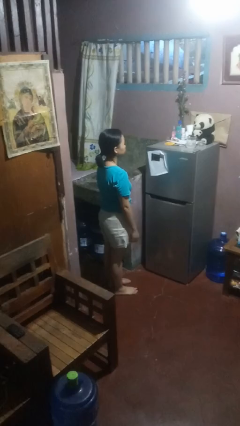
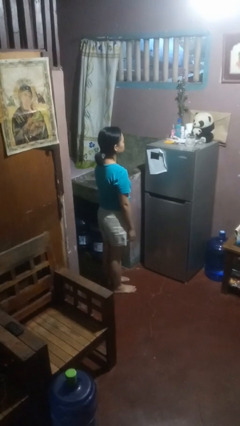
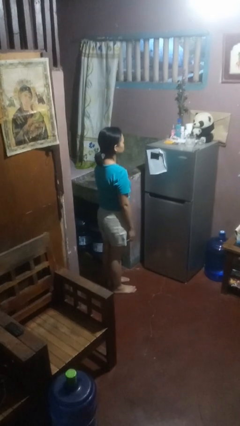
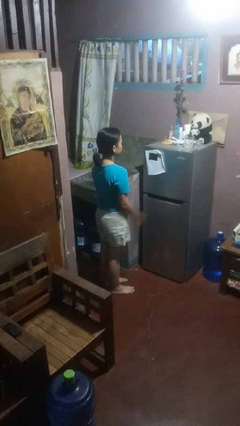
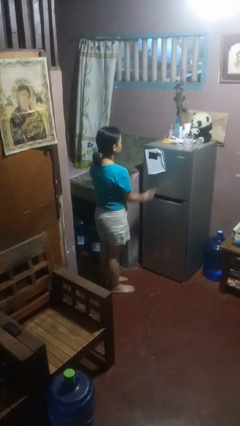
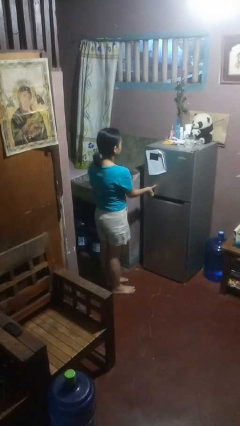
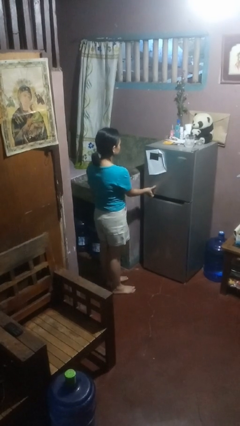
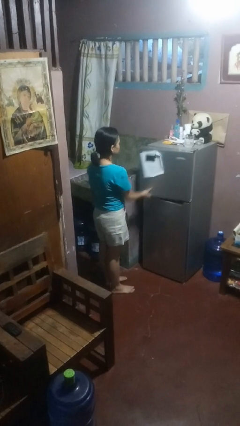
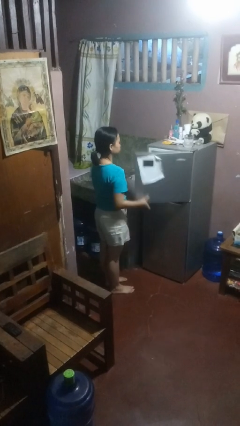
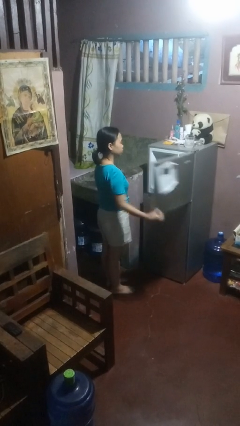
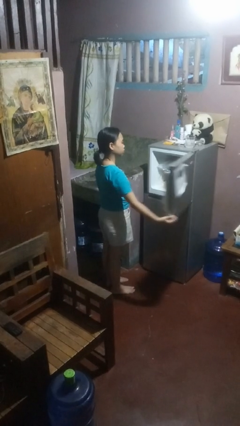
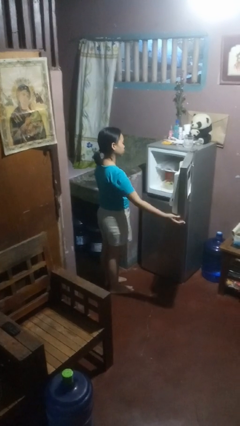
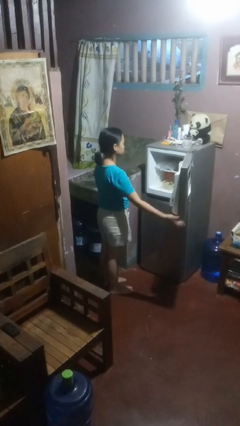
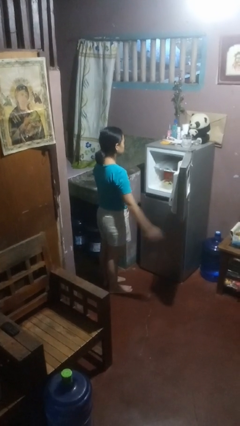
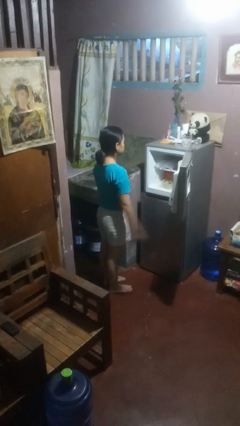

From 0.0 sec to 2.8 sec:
person opens refrigerator

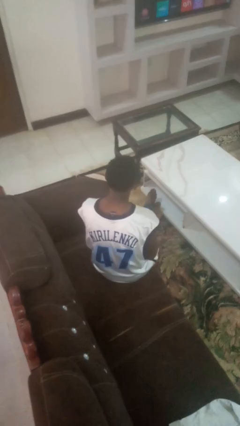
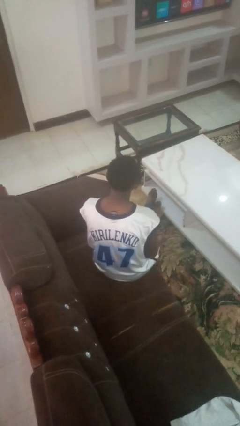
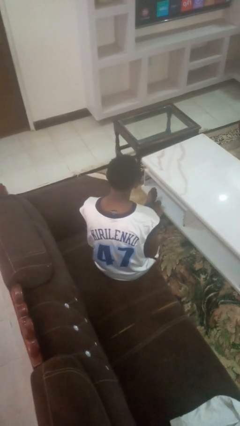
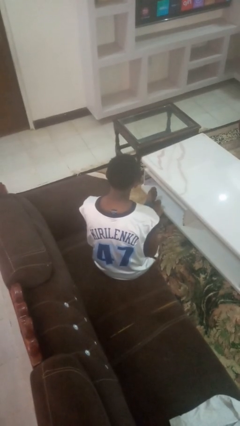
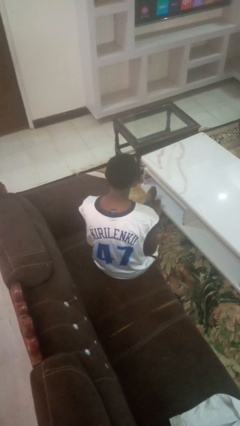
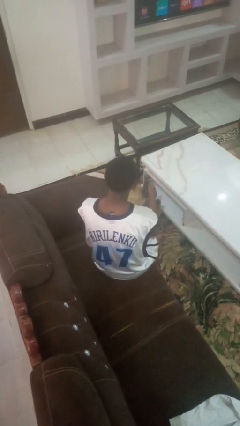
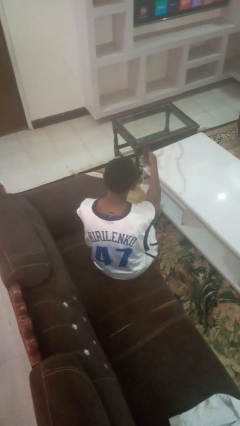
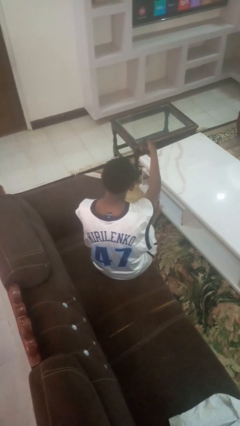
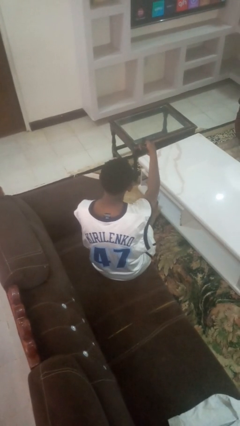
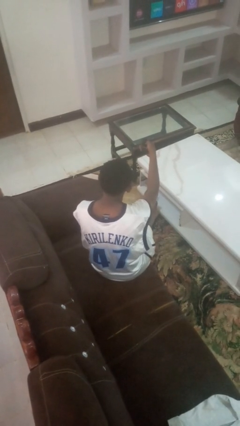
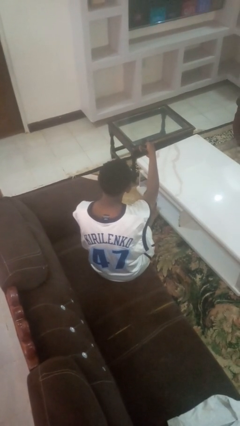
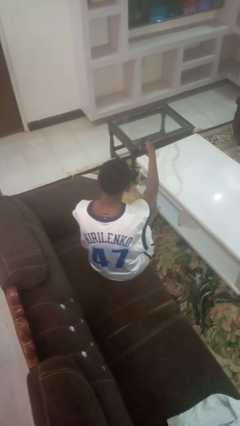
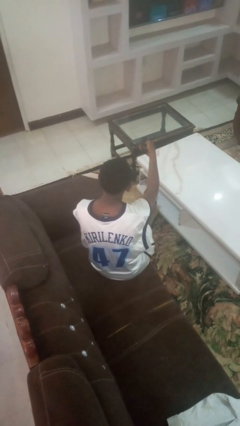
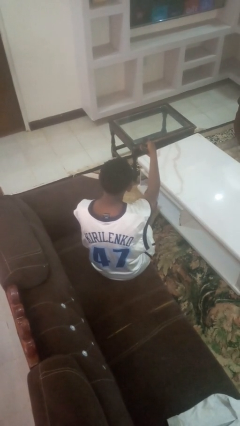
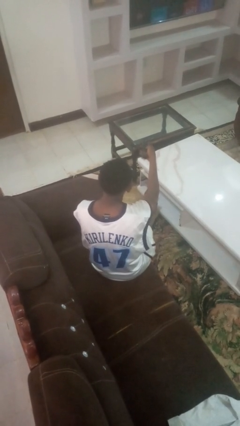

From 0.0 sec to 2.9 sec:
person uses television remote

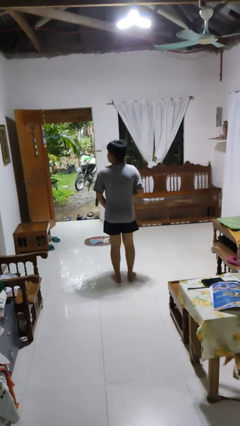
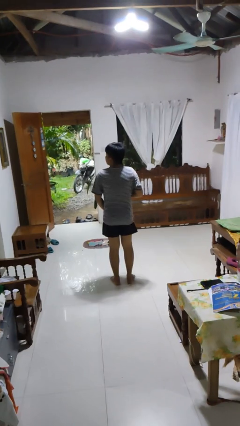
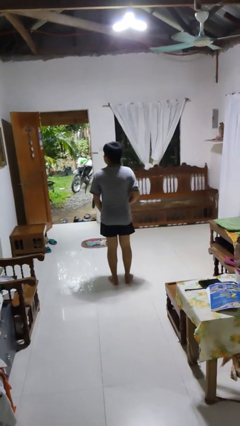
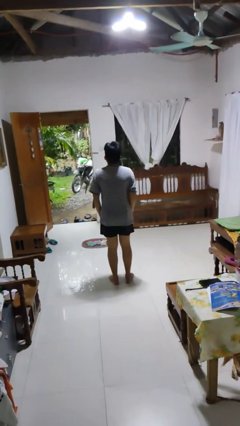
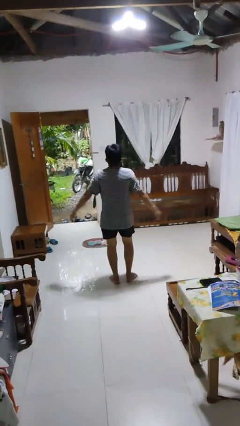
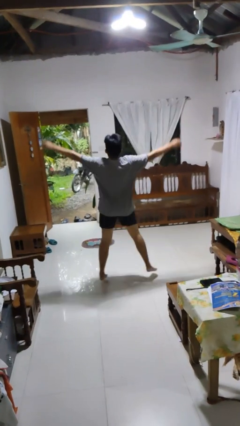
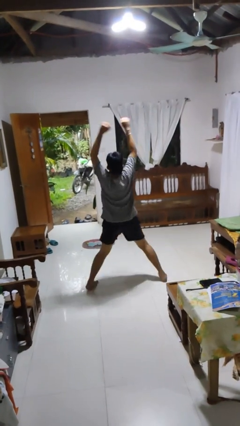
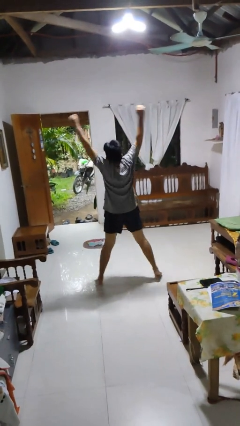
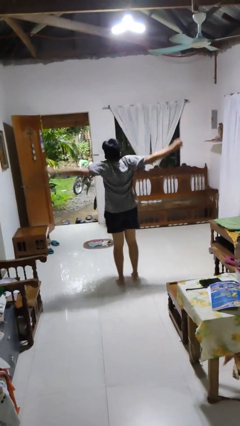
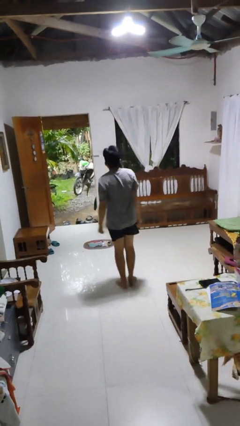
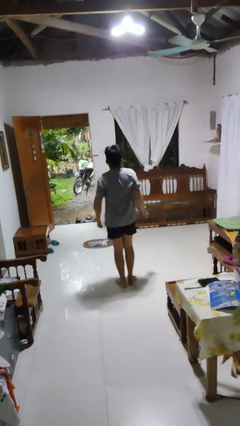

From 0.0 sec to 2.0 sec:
person exercises with jumping jacks

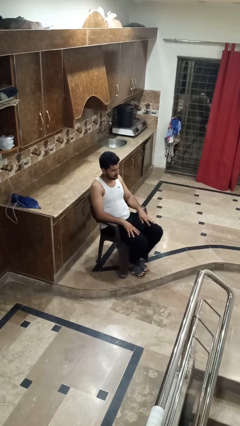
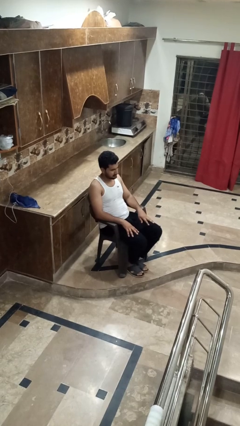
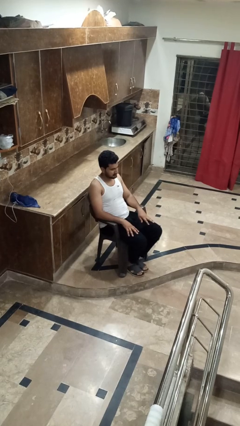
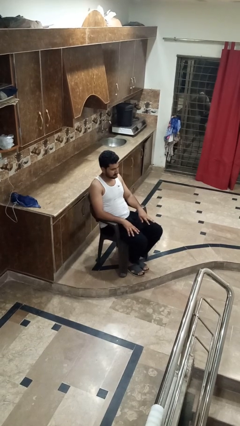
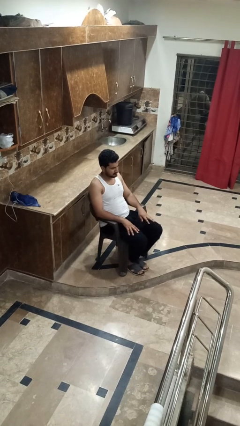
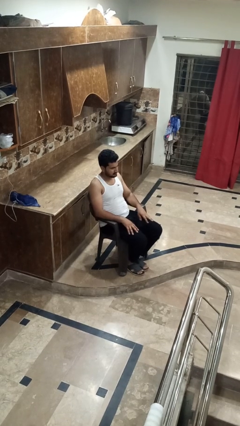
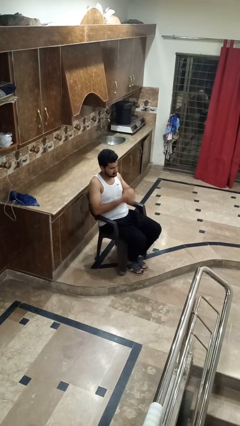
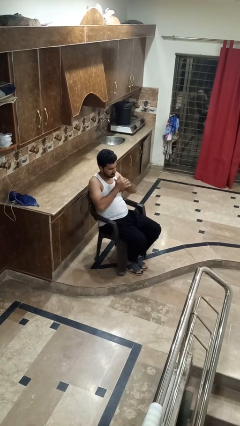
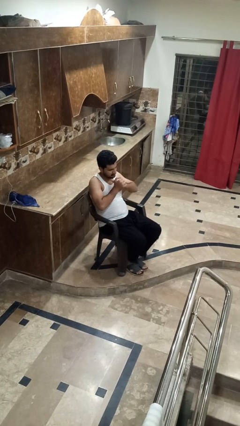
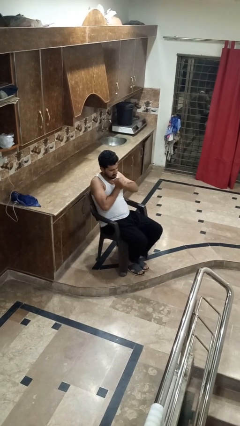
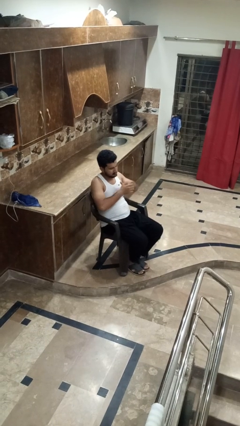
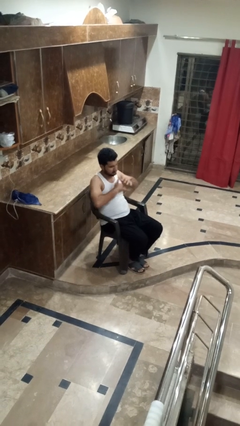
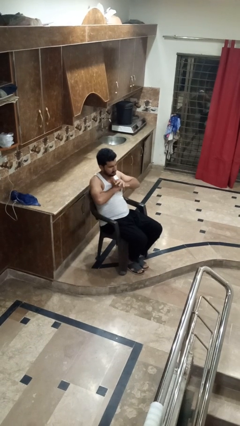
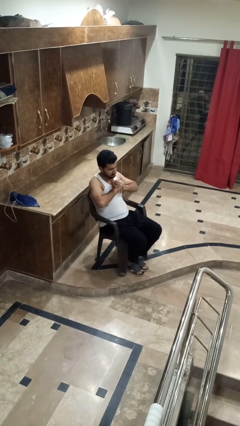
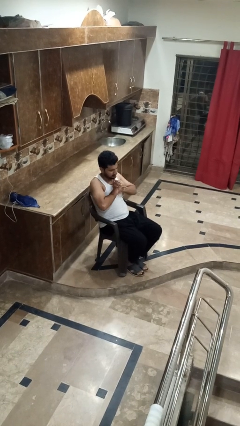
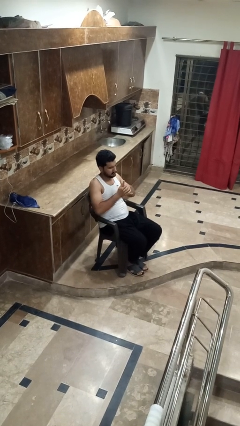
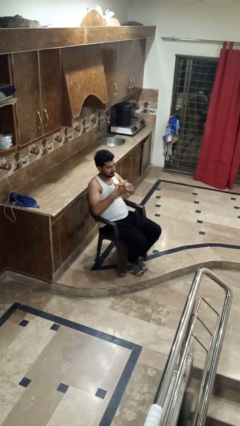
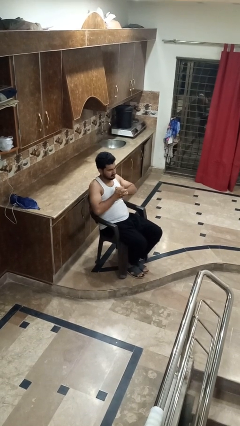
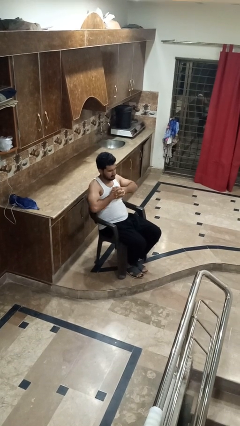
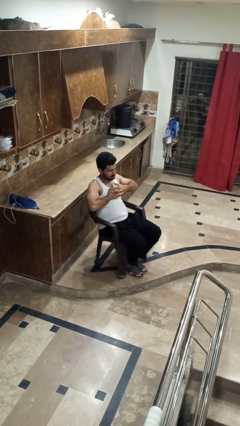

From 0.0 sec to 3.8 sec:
person cracks knuckles

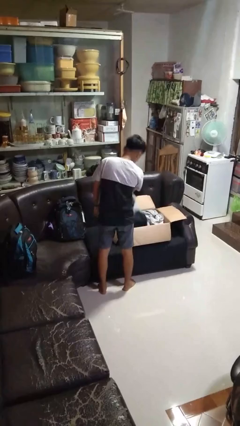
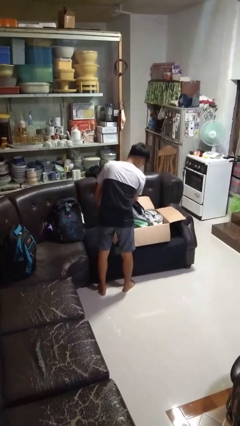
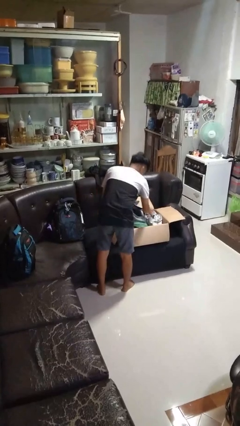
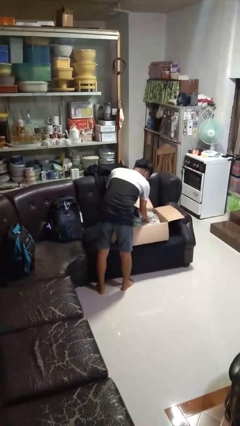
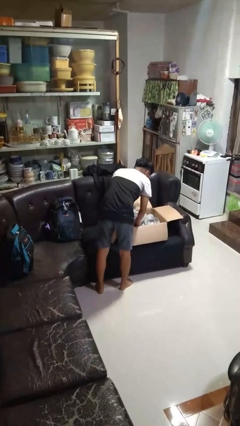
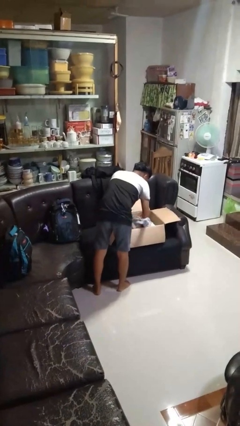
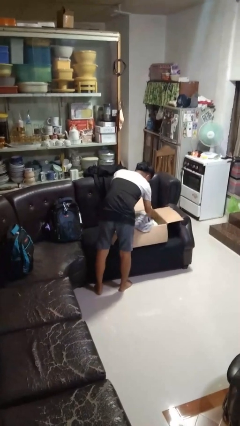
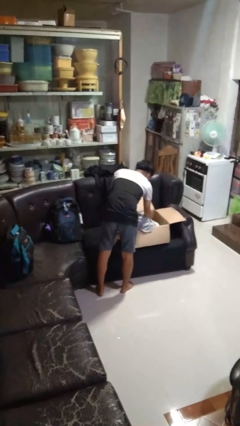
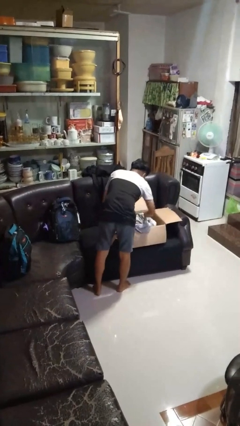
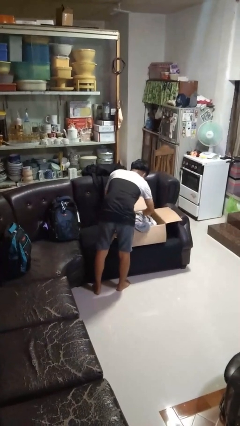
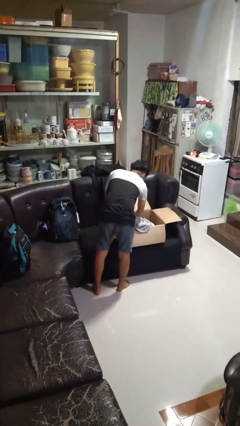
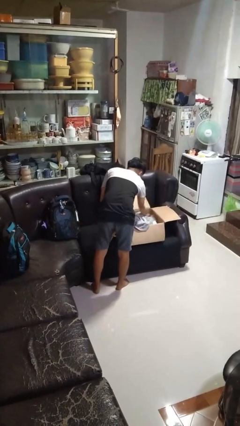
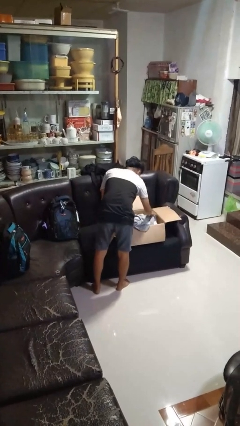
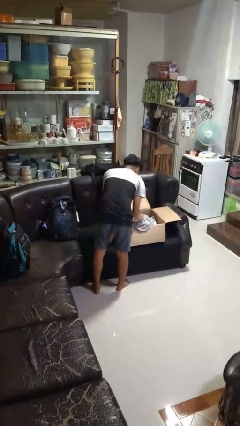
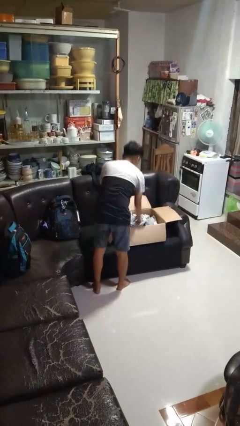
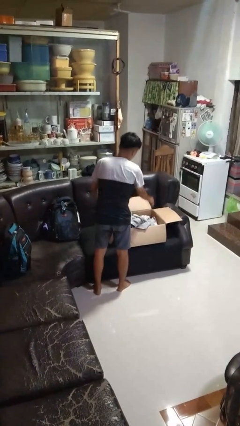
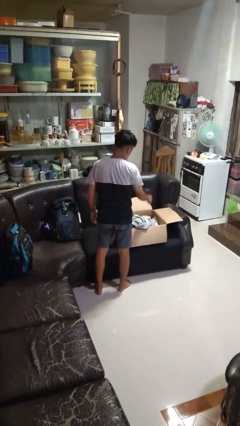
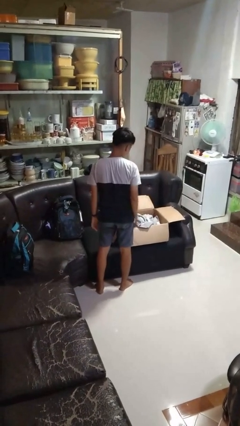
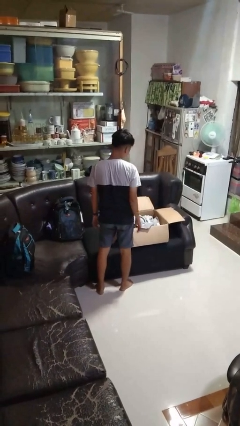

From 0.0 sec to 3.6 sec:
person searches in box

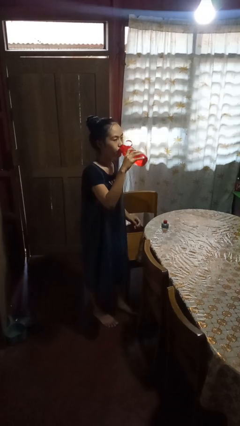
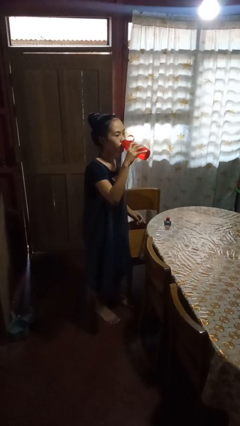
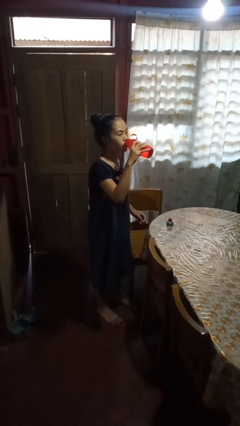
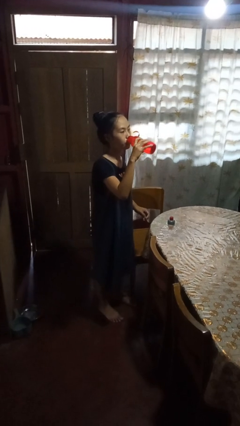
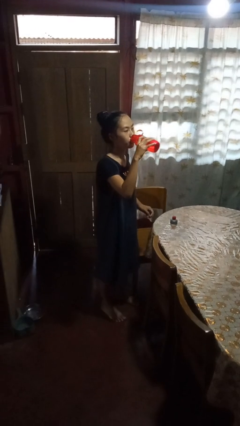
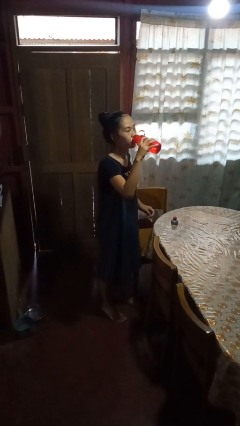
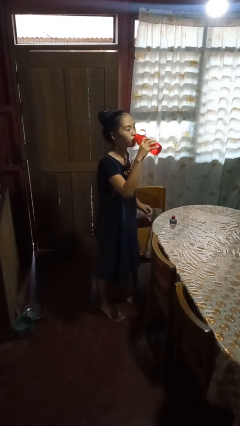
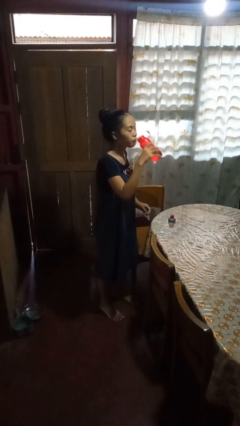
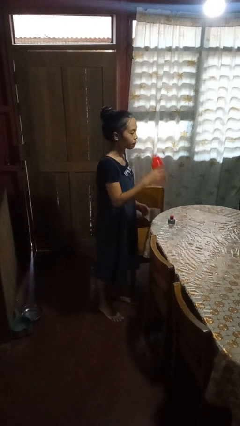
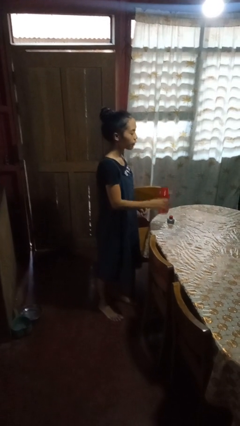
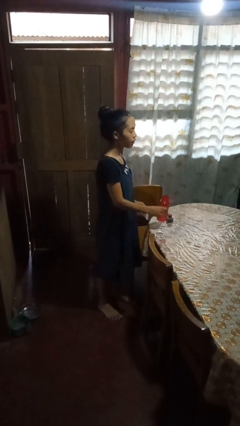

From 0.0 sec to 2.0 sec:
person drinks from bottle

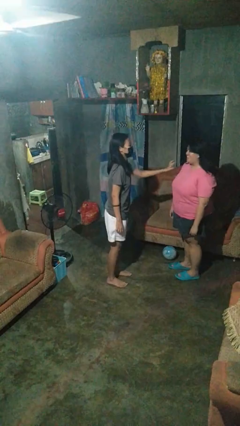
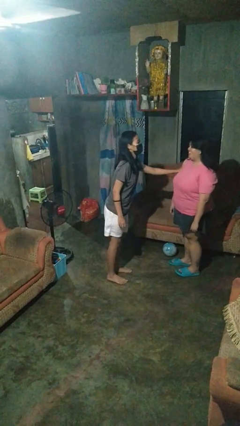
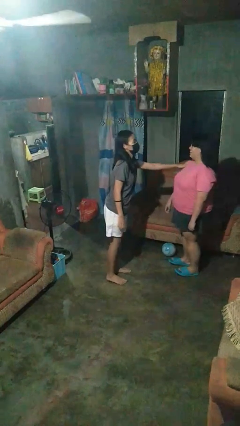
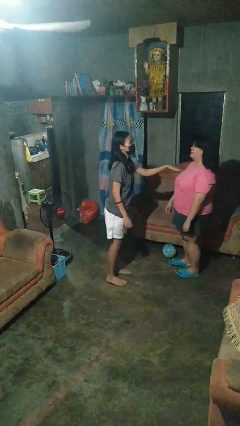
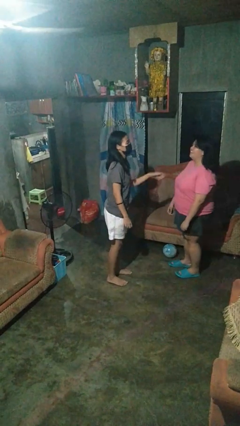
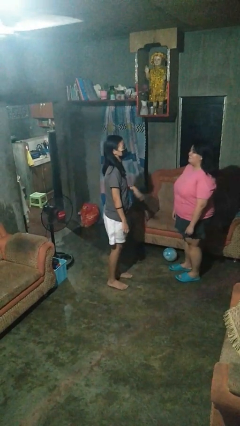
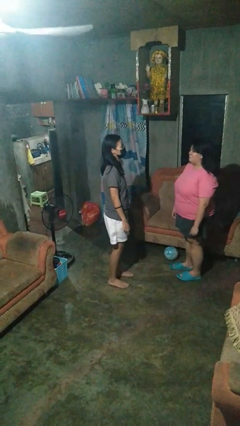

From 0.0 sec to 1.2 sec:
person shoves person
